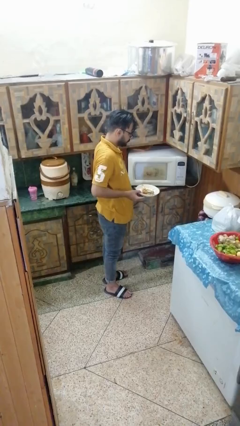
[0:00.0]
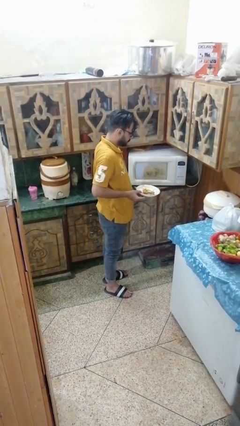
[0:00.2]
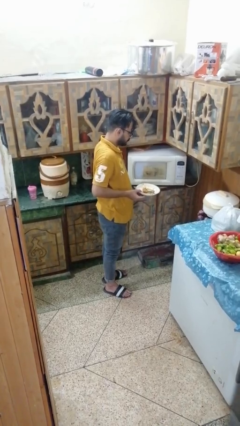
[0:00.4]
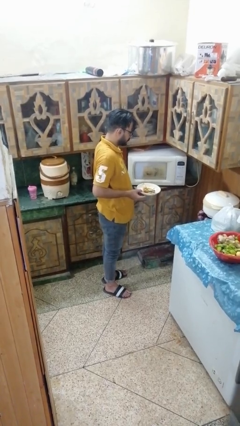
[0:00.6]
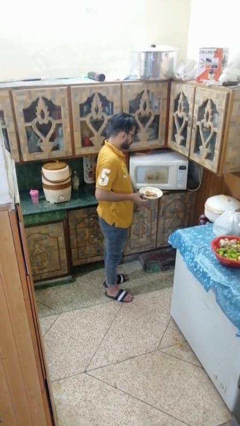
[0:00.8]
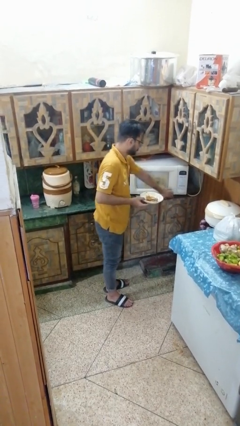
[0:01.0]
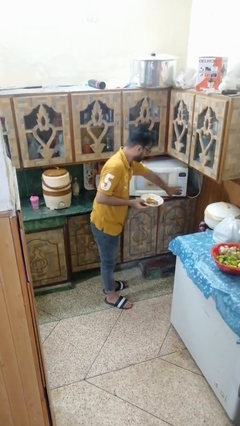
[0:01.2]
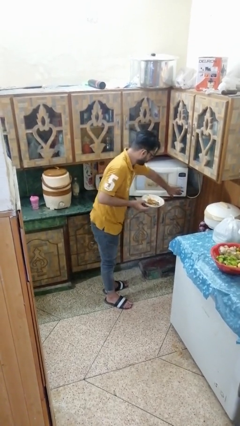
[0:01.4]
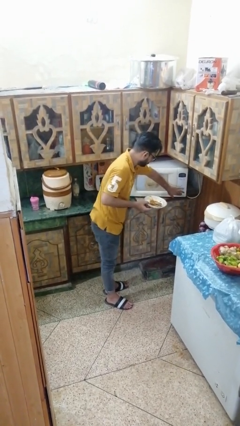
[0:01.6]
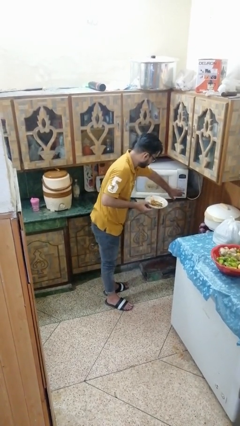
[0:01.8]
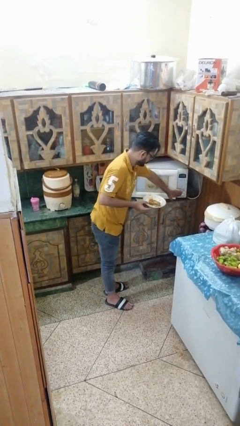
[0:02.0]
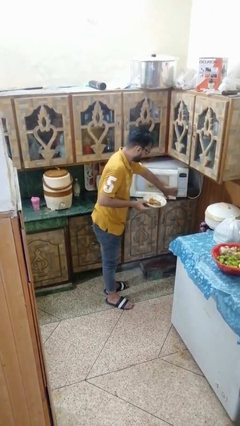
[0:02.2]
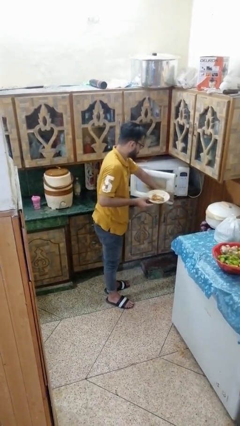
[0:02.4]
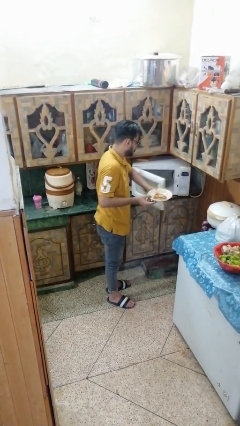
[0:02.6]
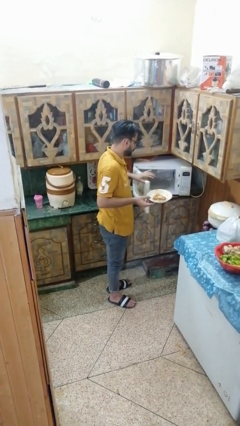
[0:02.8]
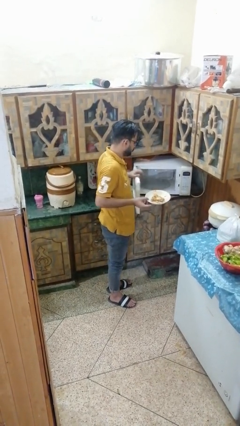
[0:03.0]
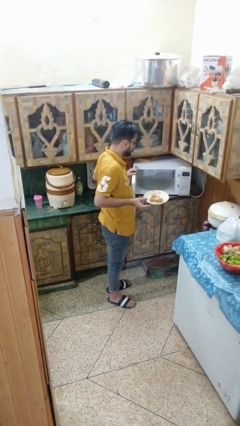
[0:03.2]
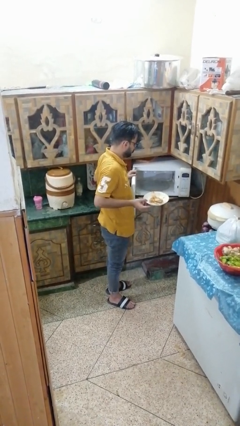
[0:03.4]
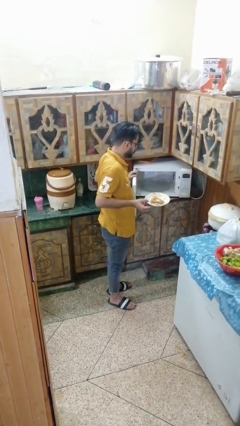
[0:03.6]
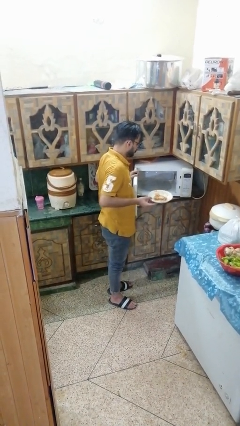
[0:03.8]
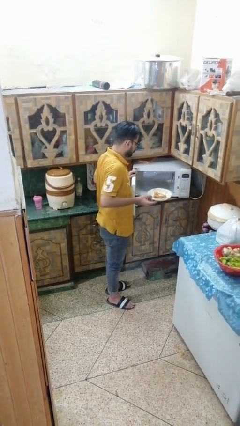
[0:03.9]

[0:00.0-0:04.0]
person opens microwave

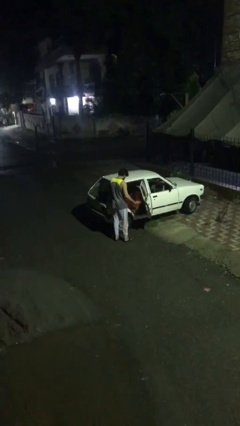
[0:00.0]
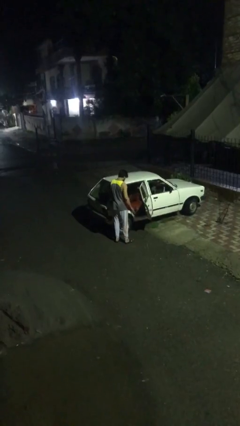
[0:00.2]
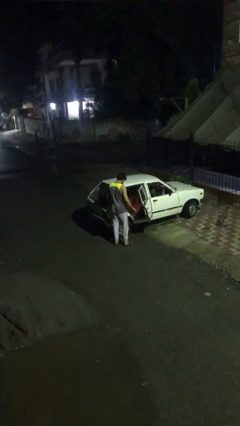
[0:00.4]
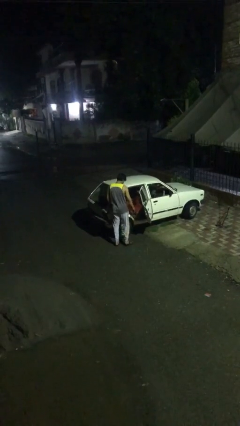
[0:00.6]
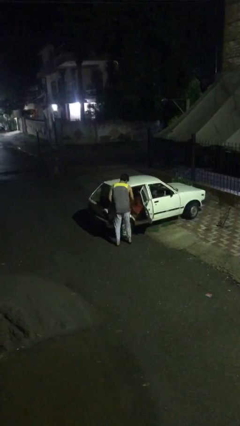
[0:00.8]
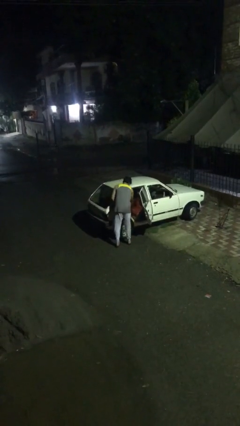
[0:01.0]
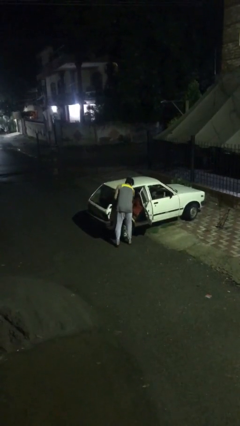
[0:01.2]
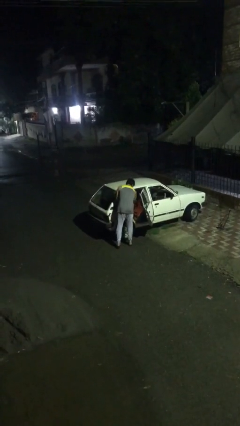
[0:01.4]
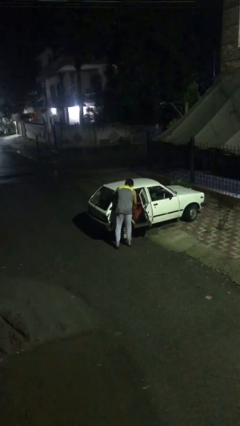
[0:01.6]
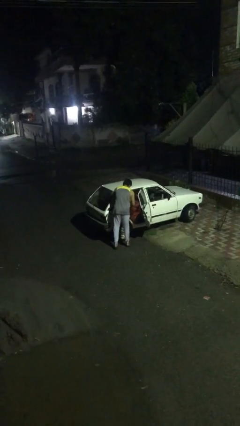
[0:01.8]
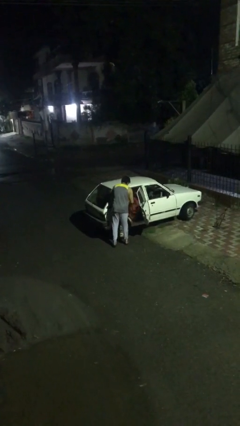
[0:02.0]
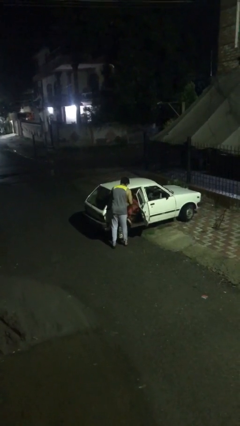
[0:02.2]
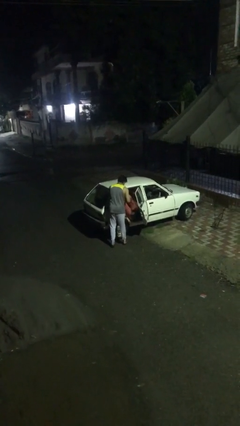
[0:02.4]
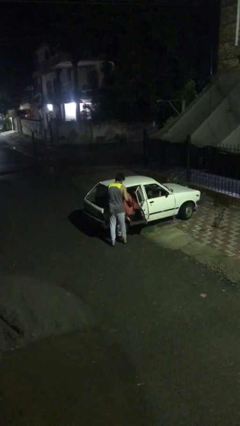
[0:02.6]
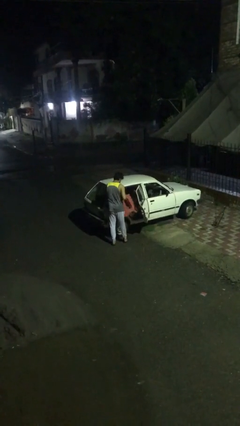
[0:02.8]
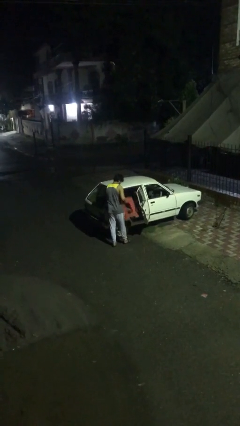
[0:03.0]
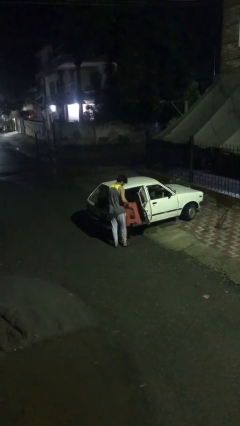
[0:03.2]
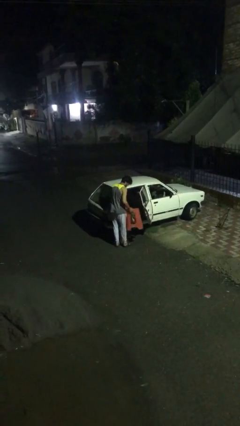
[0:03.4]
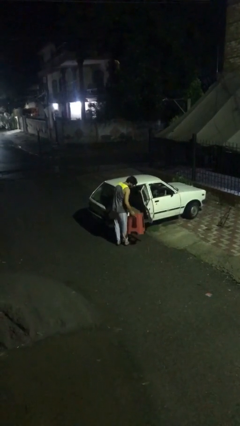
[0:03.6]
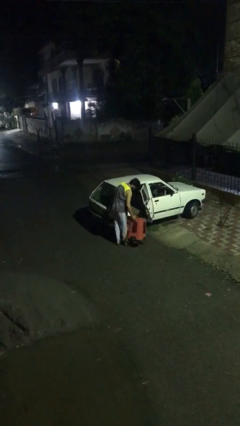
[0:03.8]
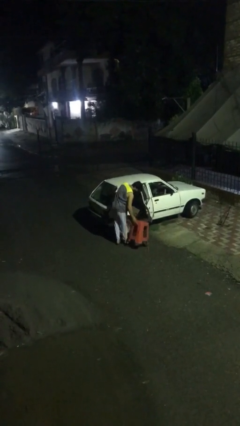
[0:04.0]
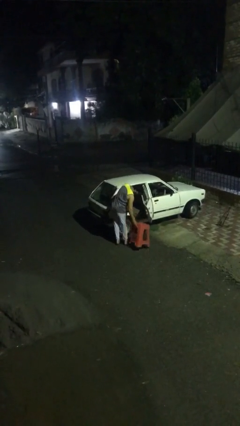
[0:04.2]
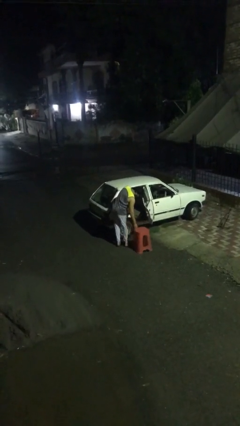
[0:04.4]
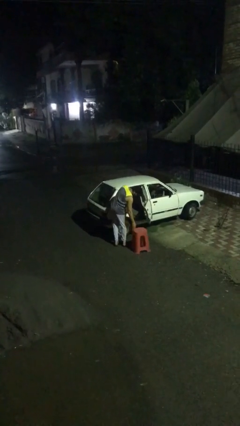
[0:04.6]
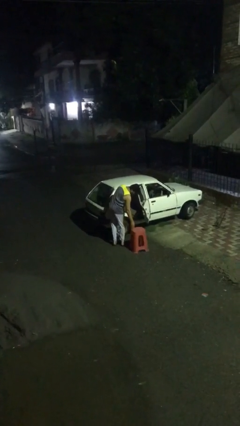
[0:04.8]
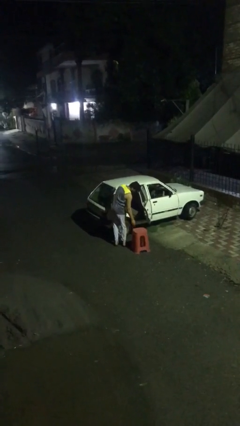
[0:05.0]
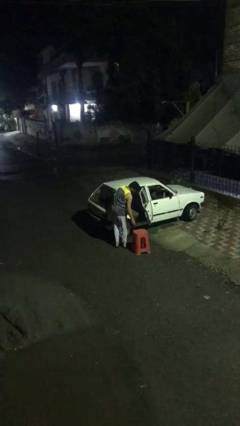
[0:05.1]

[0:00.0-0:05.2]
person unloads car

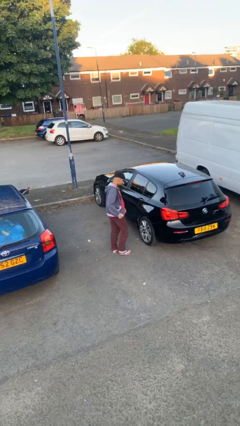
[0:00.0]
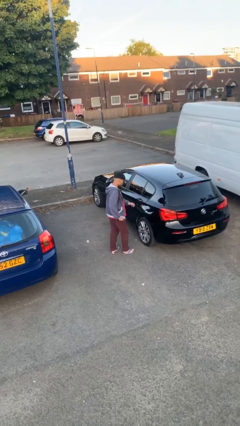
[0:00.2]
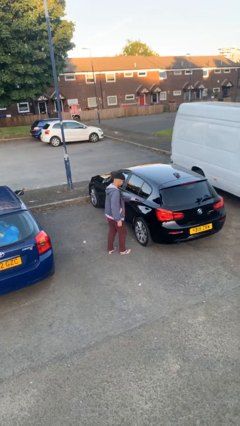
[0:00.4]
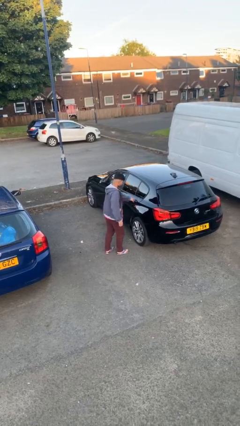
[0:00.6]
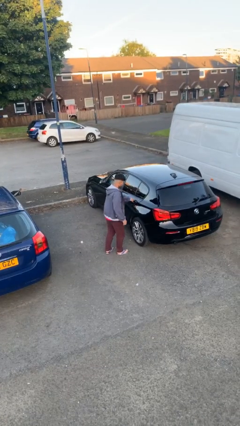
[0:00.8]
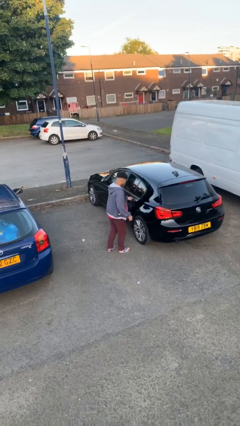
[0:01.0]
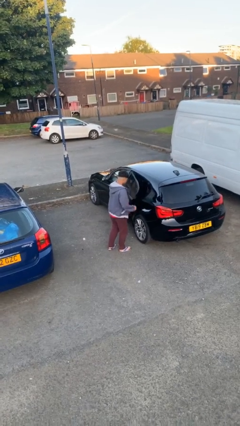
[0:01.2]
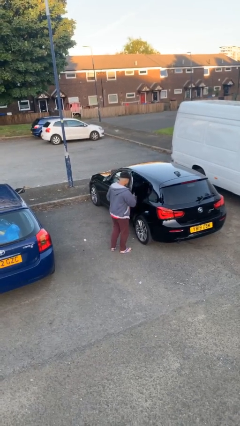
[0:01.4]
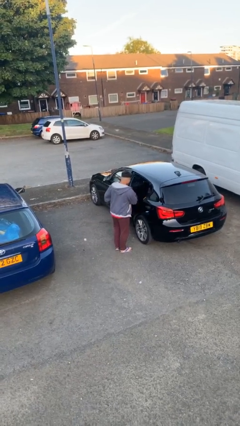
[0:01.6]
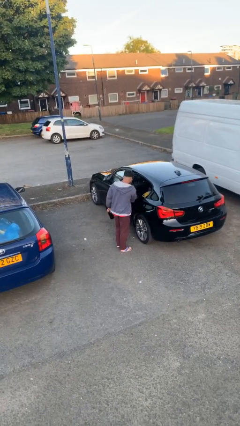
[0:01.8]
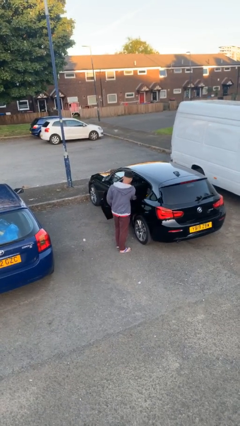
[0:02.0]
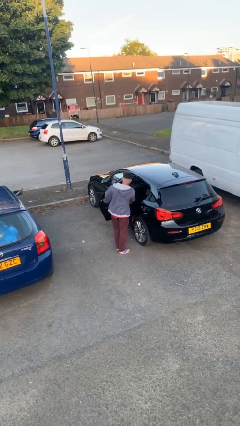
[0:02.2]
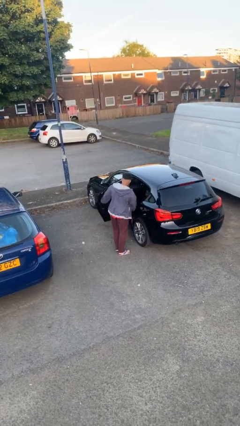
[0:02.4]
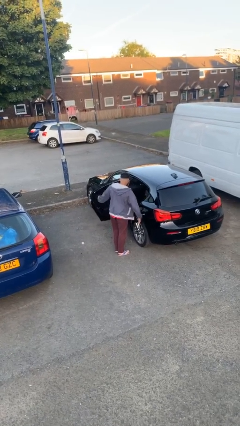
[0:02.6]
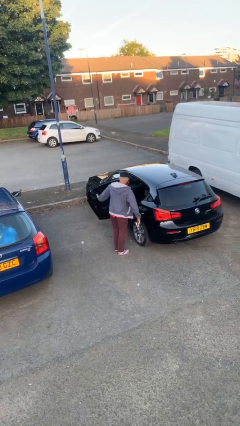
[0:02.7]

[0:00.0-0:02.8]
person opens car door

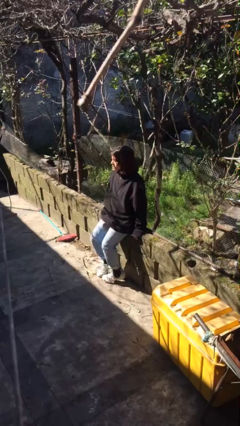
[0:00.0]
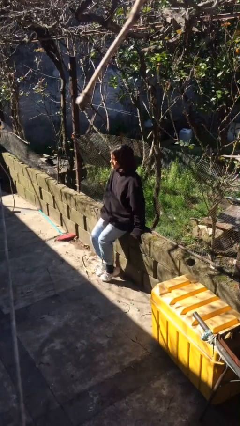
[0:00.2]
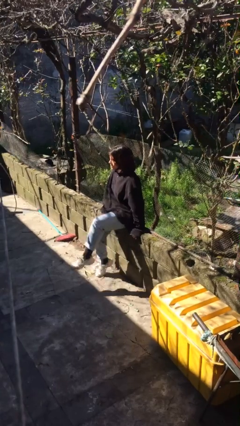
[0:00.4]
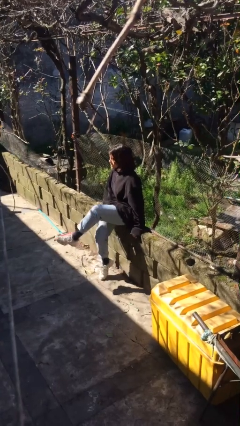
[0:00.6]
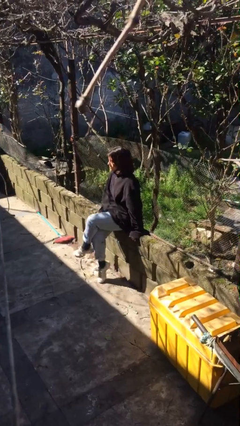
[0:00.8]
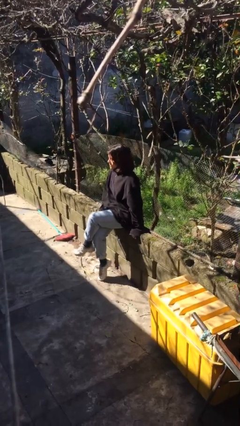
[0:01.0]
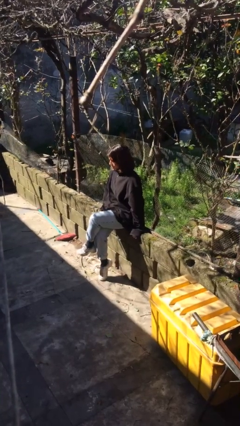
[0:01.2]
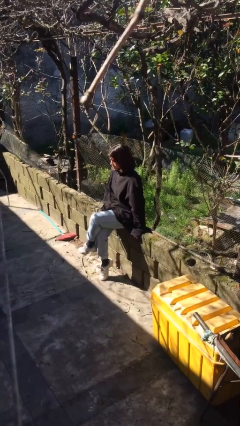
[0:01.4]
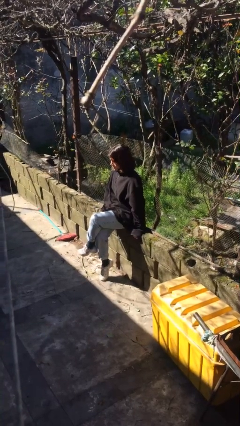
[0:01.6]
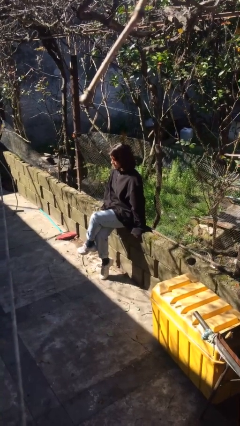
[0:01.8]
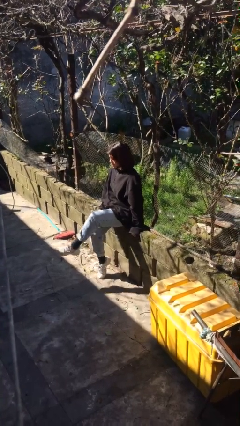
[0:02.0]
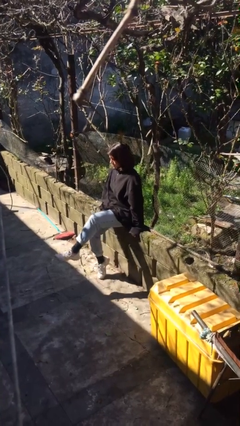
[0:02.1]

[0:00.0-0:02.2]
person crosses legs

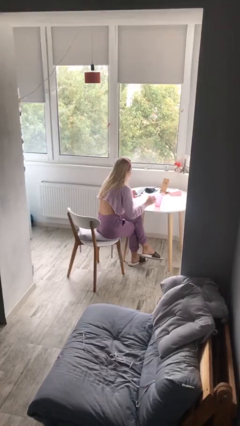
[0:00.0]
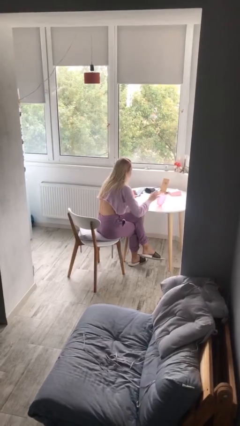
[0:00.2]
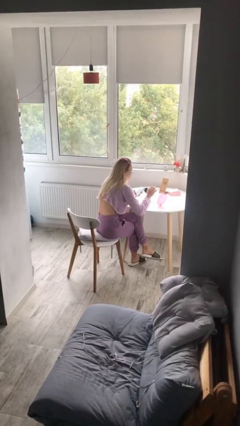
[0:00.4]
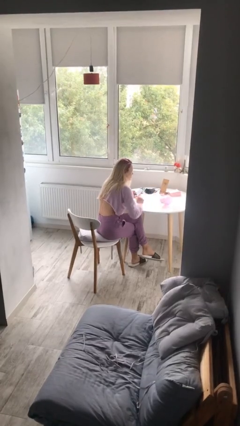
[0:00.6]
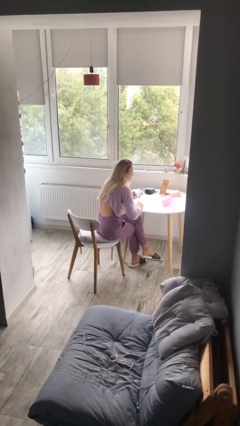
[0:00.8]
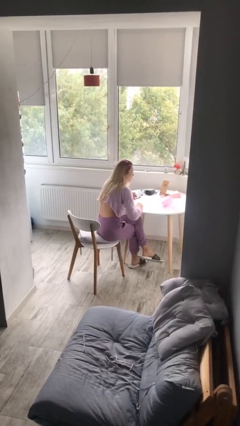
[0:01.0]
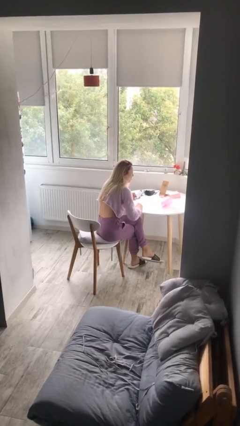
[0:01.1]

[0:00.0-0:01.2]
person knocks over glass

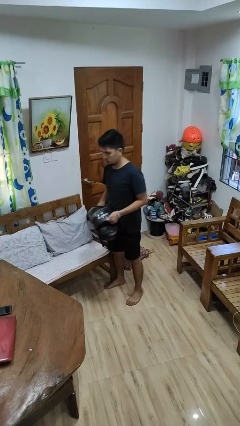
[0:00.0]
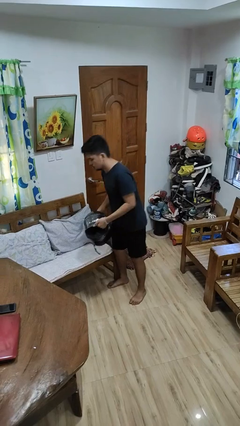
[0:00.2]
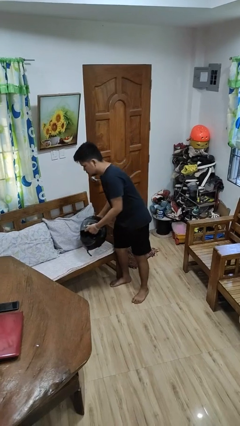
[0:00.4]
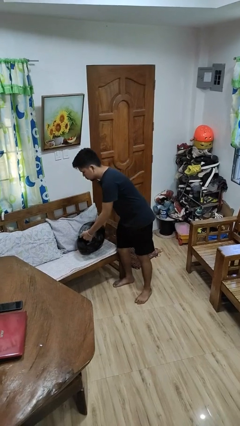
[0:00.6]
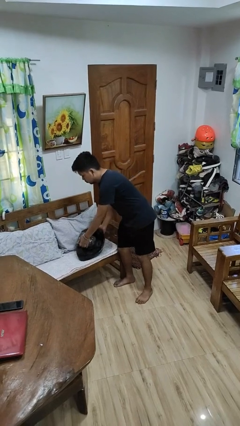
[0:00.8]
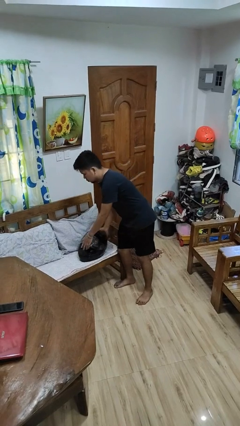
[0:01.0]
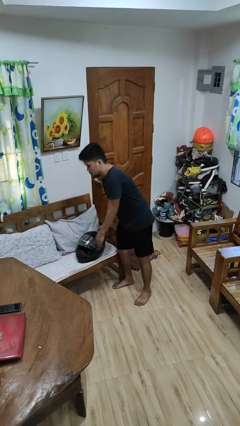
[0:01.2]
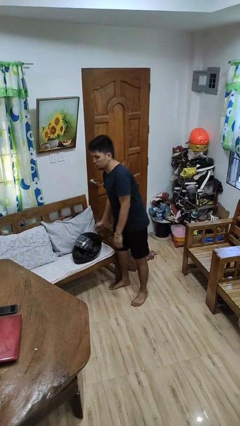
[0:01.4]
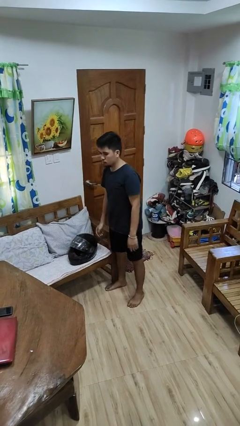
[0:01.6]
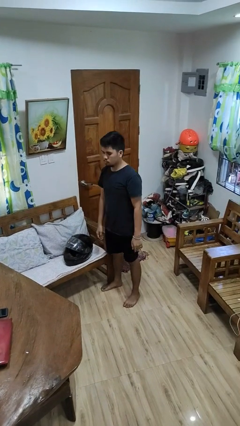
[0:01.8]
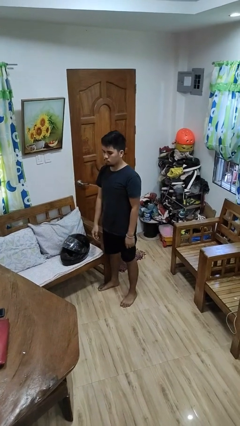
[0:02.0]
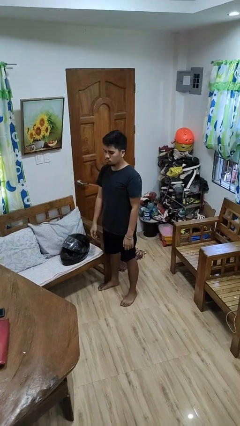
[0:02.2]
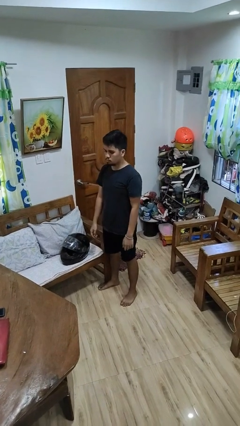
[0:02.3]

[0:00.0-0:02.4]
person puts down object on couch
